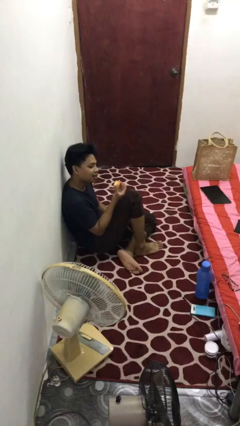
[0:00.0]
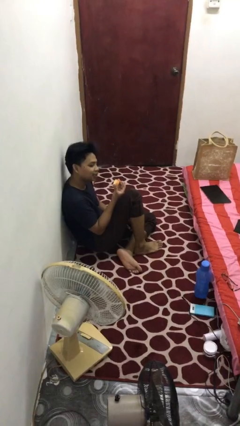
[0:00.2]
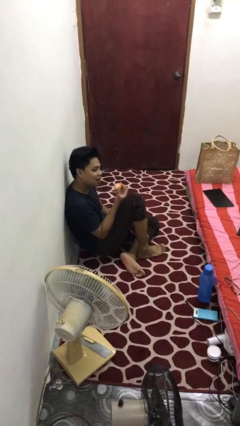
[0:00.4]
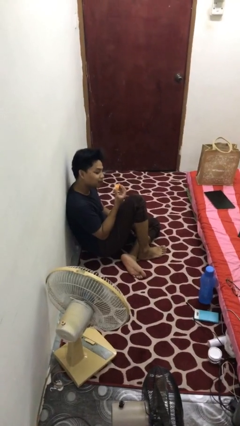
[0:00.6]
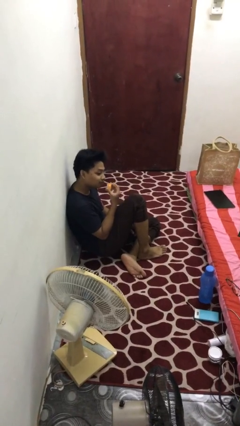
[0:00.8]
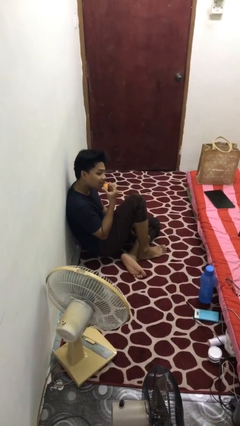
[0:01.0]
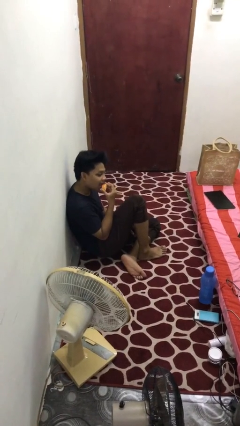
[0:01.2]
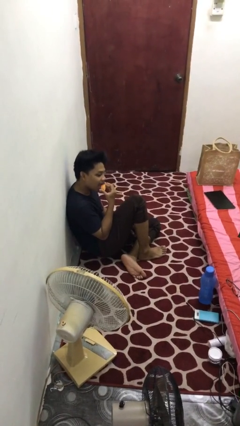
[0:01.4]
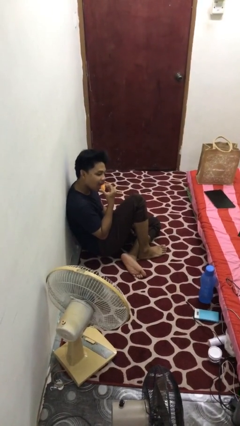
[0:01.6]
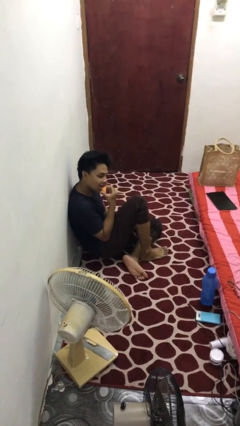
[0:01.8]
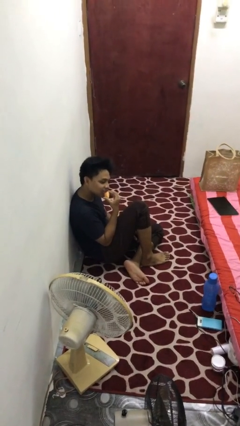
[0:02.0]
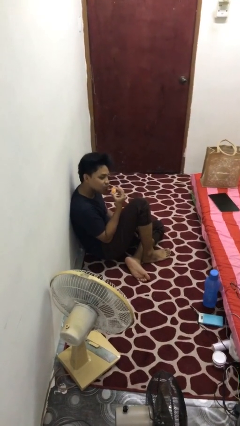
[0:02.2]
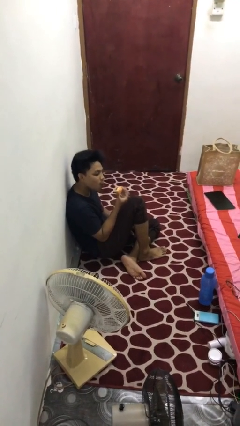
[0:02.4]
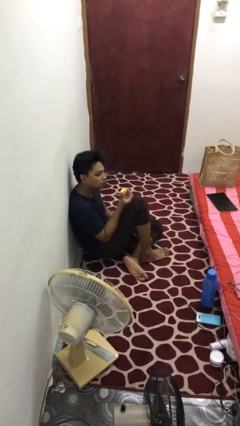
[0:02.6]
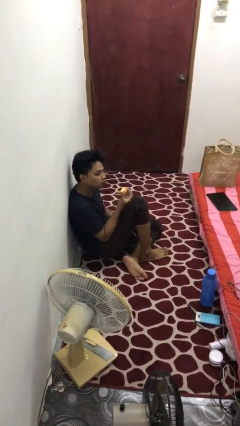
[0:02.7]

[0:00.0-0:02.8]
person eats apple

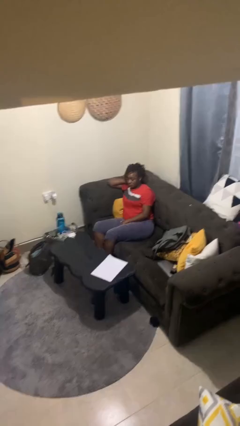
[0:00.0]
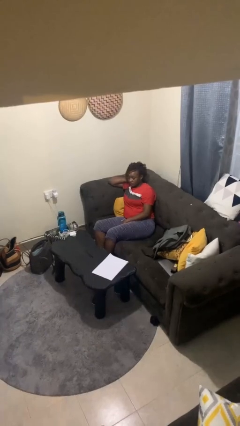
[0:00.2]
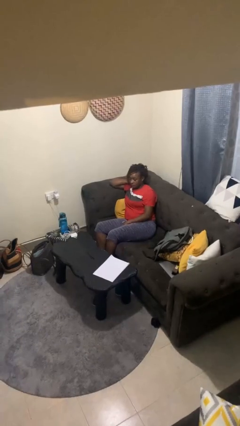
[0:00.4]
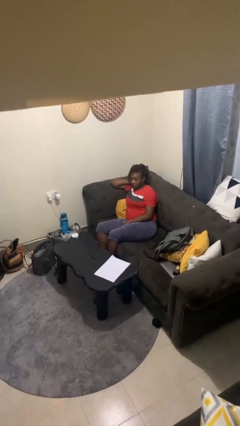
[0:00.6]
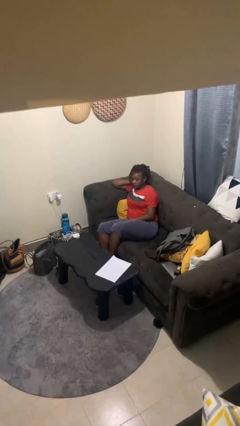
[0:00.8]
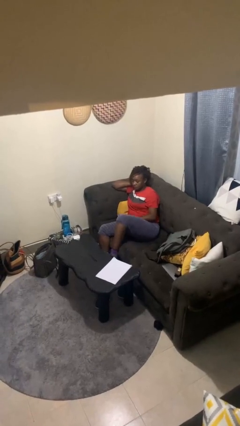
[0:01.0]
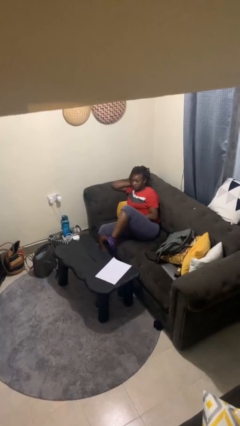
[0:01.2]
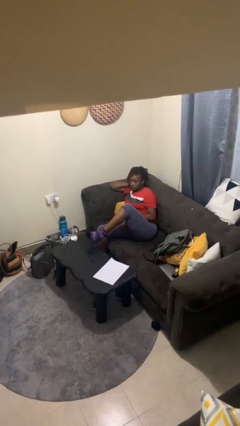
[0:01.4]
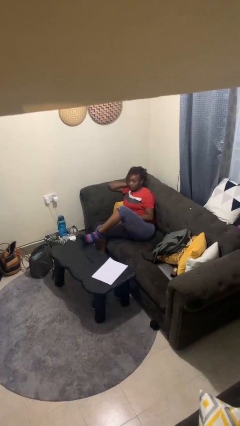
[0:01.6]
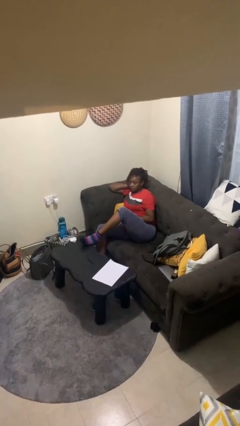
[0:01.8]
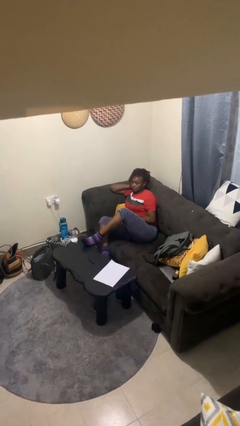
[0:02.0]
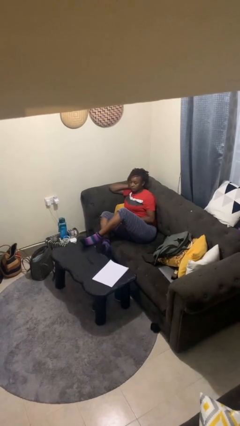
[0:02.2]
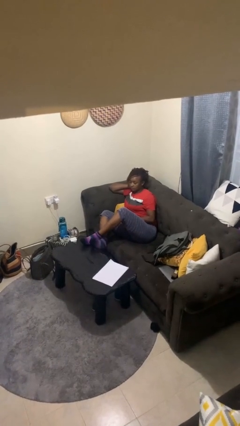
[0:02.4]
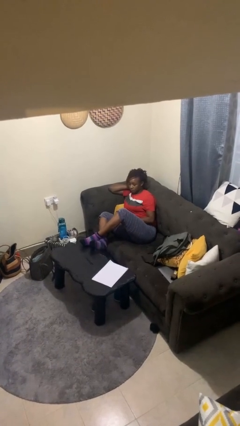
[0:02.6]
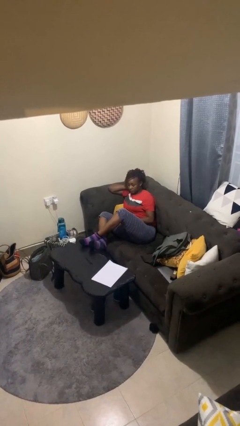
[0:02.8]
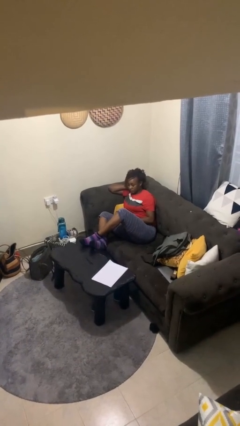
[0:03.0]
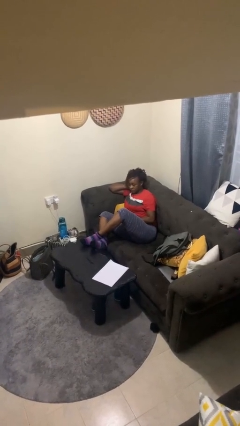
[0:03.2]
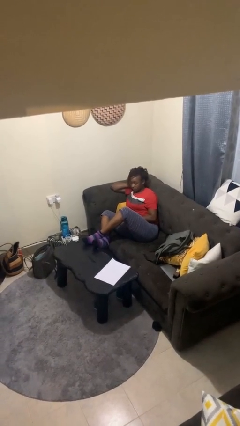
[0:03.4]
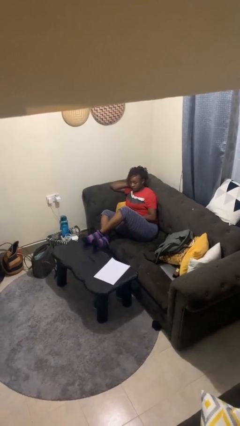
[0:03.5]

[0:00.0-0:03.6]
person puts feet up

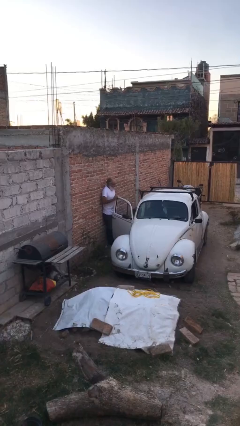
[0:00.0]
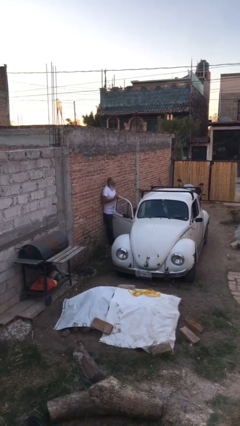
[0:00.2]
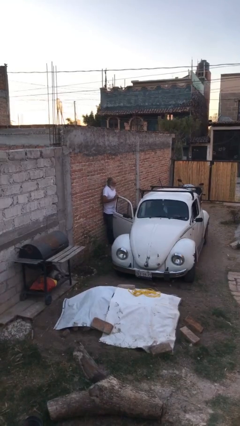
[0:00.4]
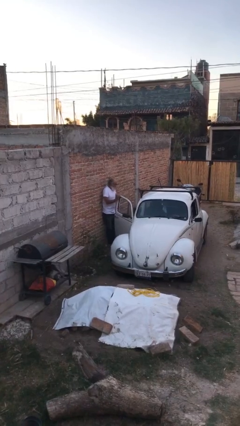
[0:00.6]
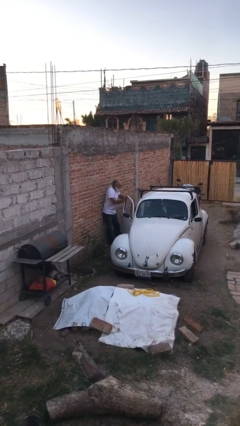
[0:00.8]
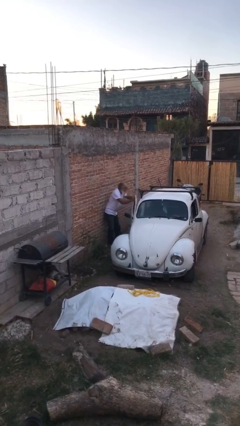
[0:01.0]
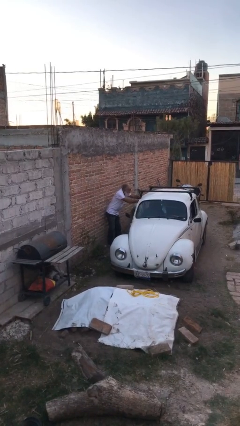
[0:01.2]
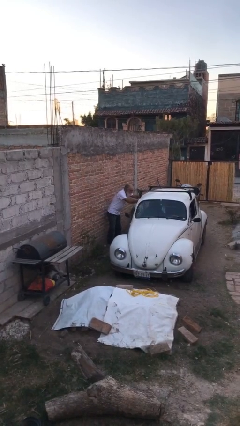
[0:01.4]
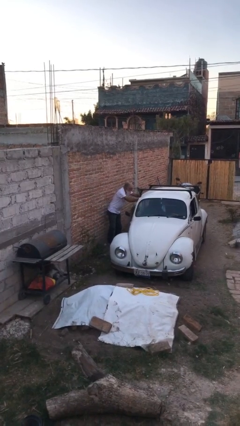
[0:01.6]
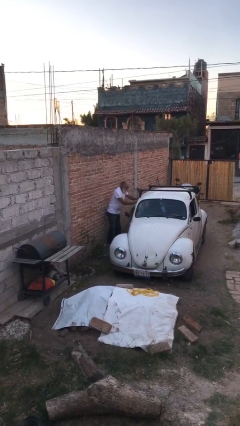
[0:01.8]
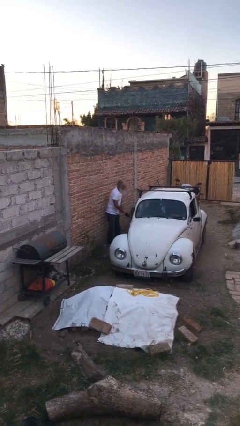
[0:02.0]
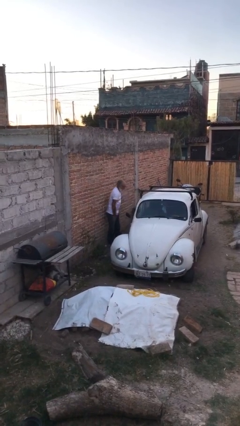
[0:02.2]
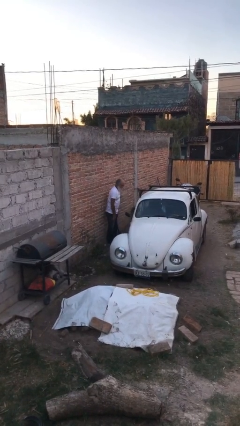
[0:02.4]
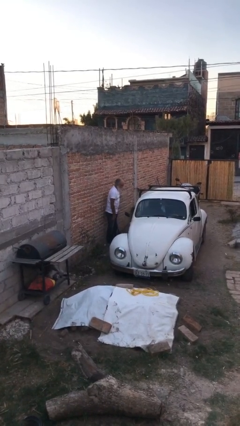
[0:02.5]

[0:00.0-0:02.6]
person closes car door

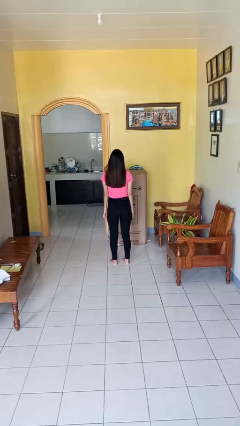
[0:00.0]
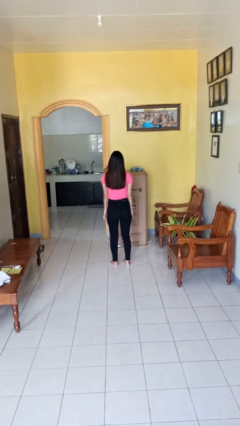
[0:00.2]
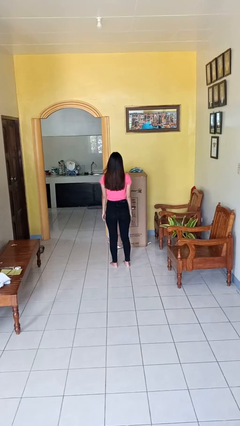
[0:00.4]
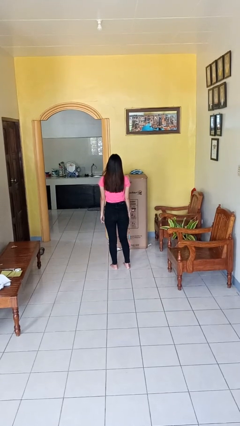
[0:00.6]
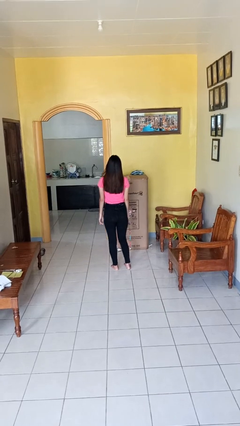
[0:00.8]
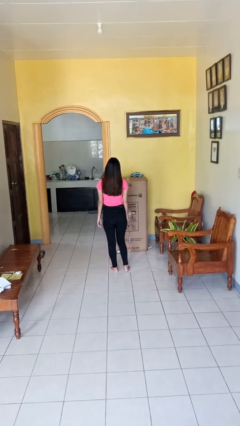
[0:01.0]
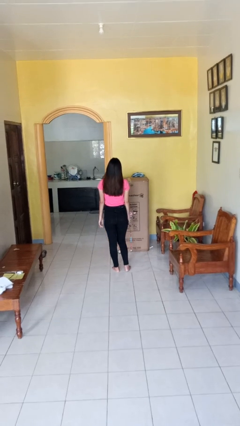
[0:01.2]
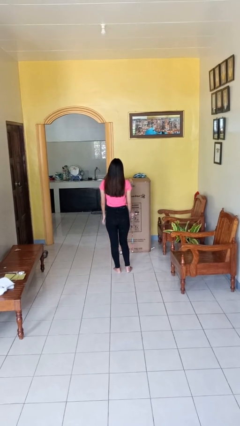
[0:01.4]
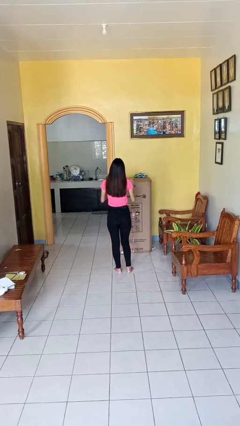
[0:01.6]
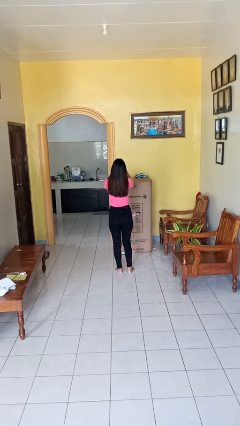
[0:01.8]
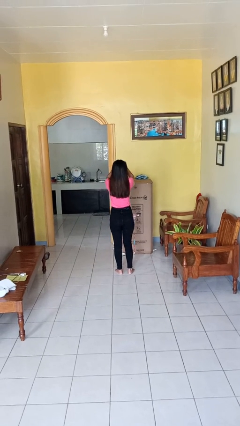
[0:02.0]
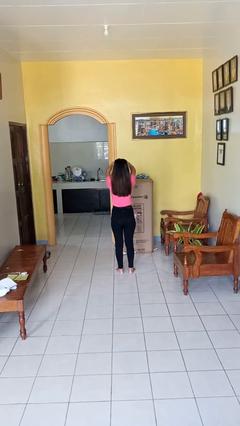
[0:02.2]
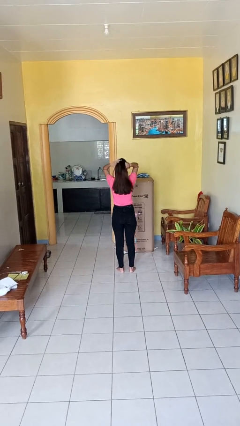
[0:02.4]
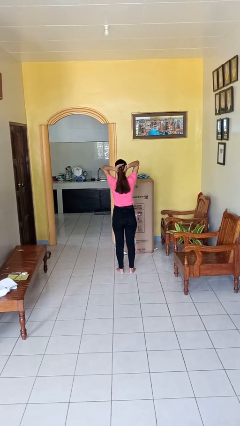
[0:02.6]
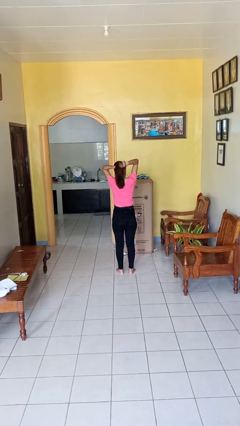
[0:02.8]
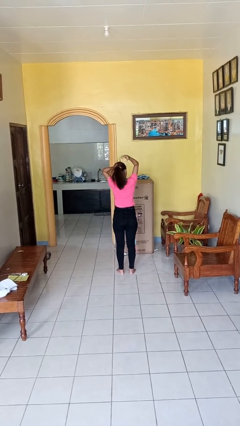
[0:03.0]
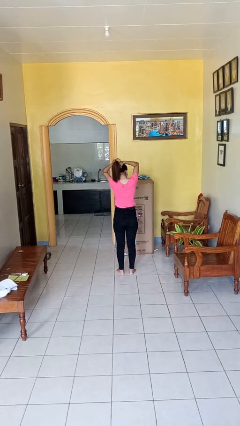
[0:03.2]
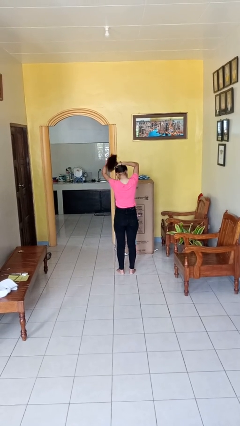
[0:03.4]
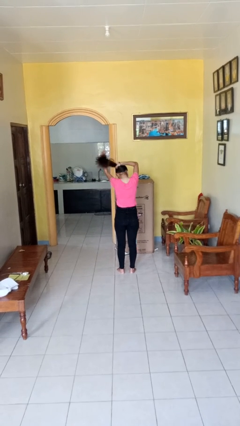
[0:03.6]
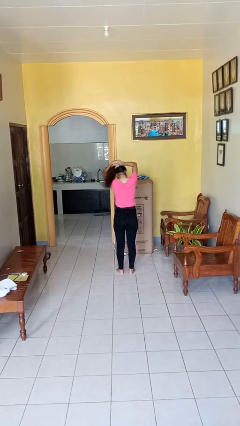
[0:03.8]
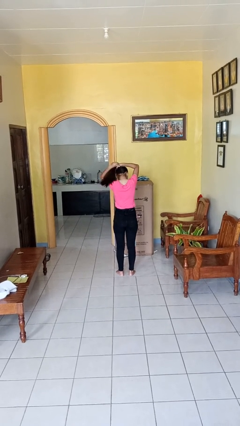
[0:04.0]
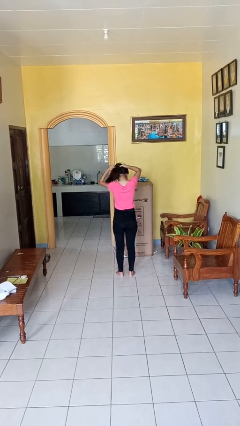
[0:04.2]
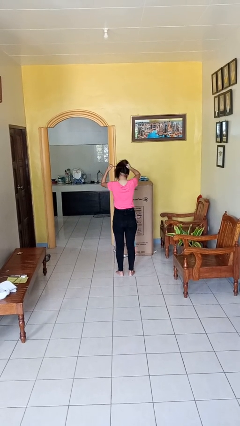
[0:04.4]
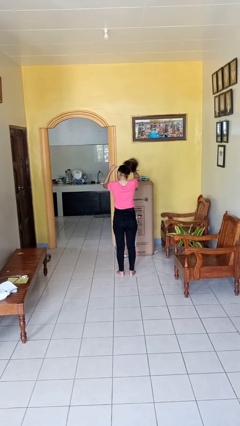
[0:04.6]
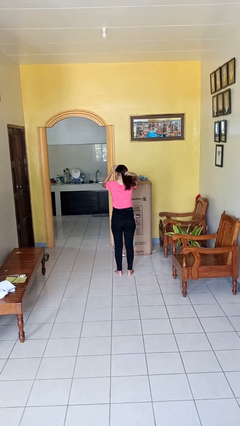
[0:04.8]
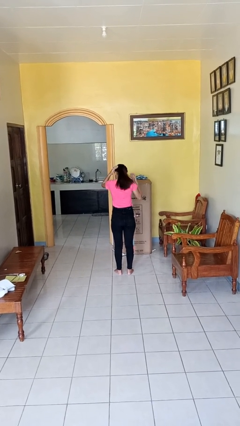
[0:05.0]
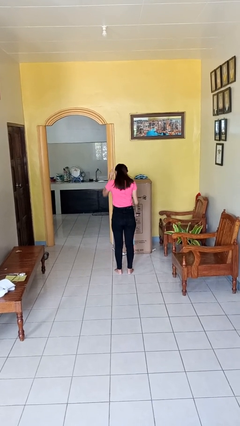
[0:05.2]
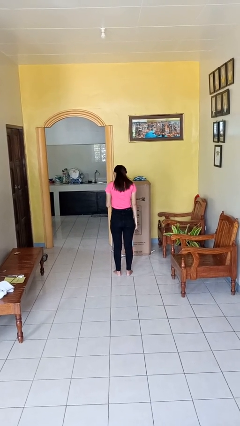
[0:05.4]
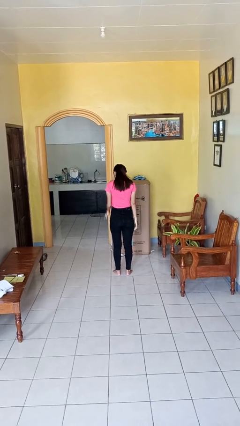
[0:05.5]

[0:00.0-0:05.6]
person puts hair in ponytail

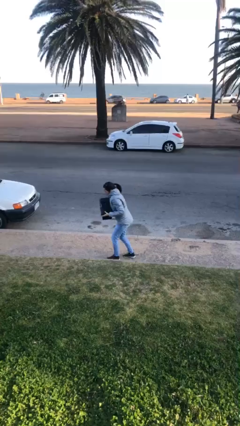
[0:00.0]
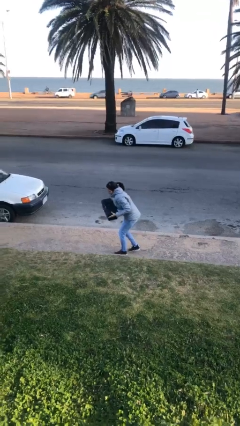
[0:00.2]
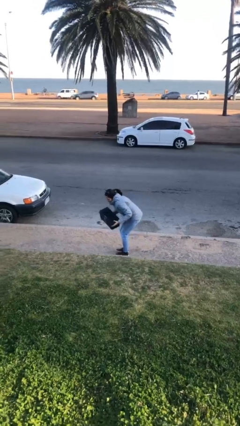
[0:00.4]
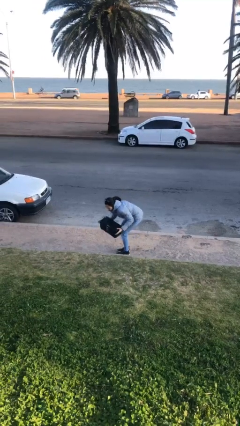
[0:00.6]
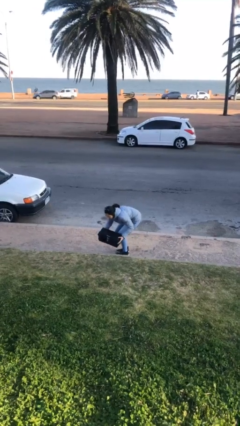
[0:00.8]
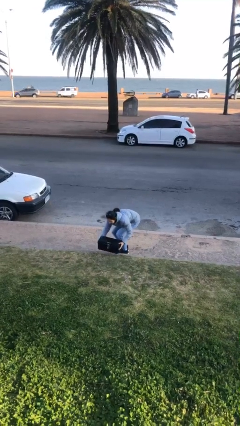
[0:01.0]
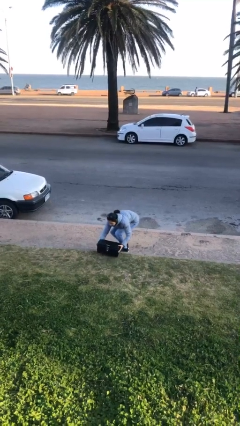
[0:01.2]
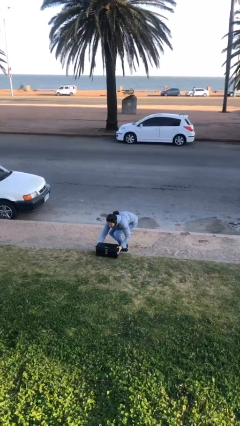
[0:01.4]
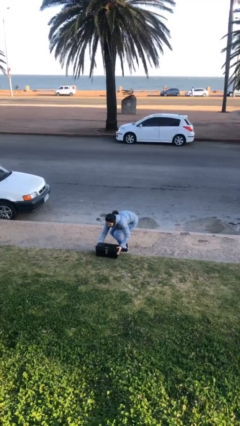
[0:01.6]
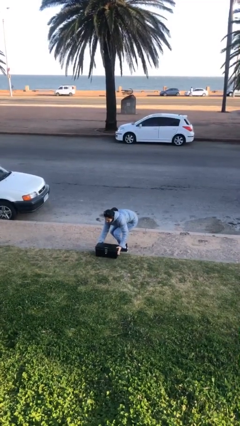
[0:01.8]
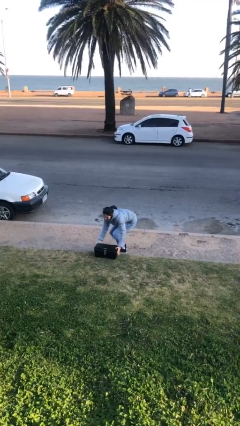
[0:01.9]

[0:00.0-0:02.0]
person puts down object on floor
